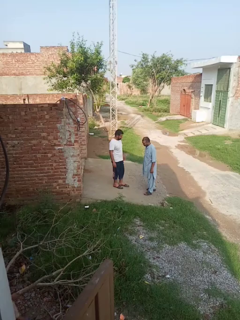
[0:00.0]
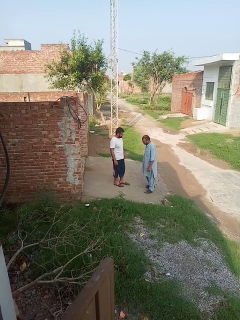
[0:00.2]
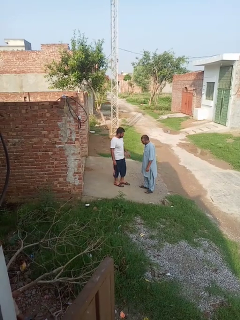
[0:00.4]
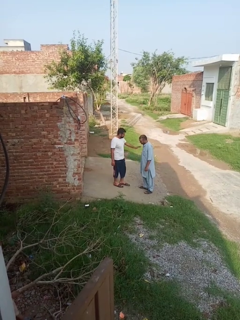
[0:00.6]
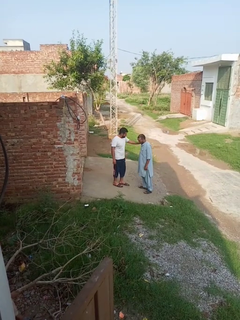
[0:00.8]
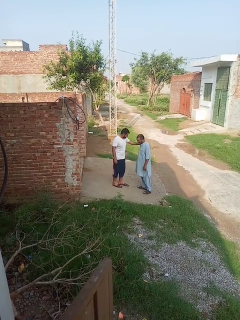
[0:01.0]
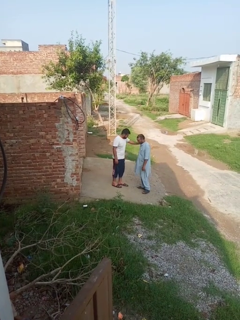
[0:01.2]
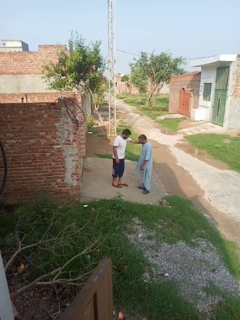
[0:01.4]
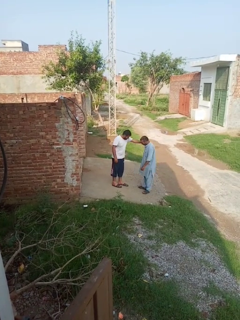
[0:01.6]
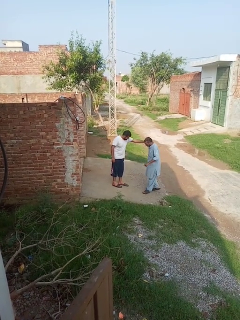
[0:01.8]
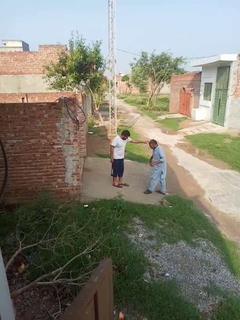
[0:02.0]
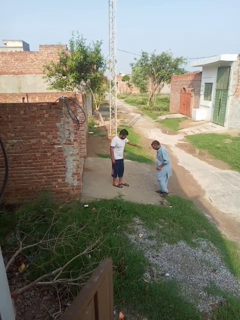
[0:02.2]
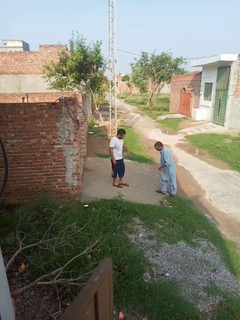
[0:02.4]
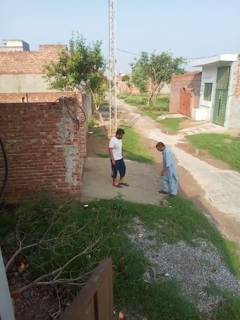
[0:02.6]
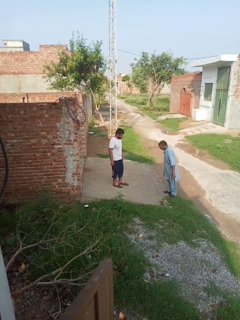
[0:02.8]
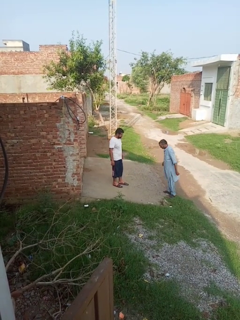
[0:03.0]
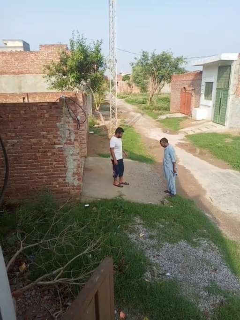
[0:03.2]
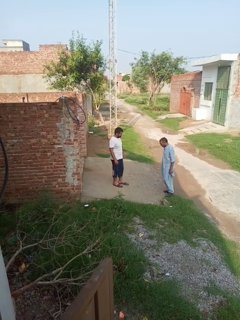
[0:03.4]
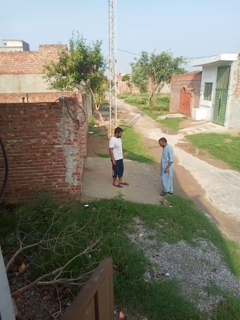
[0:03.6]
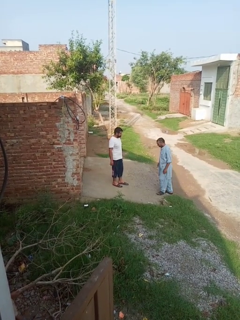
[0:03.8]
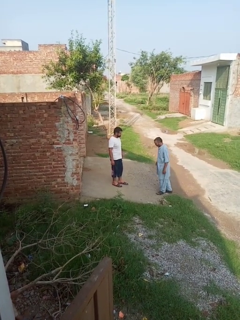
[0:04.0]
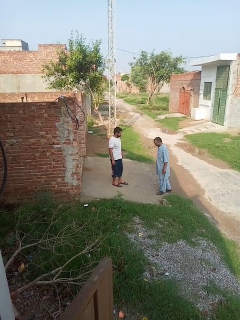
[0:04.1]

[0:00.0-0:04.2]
person shoves person

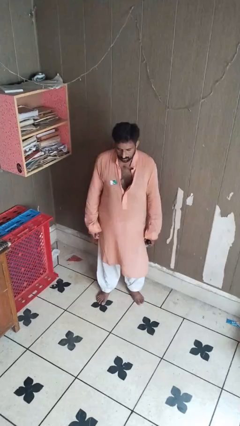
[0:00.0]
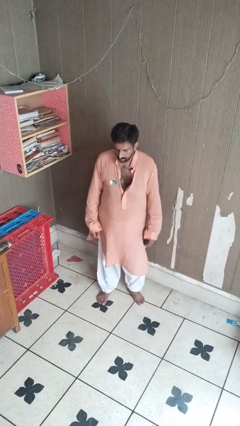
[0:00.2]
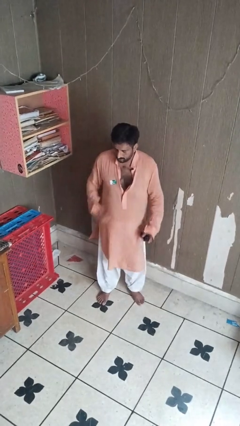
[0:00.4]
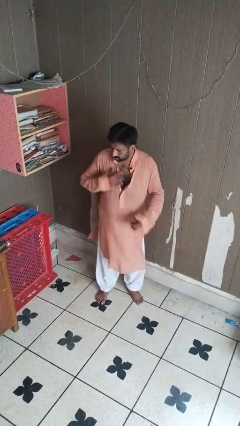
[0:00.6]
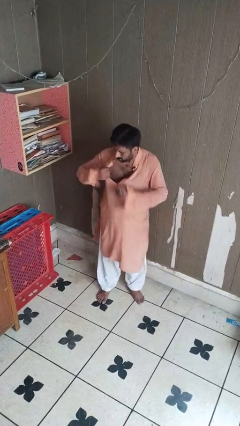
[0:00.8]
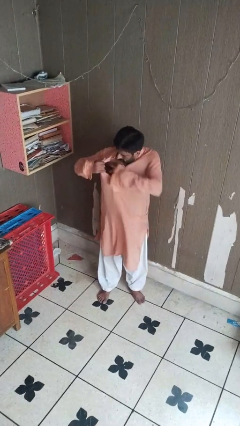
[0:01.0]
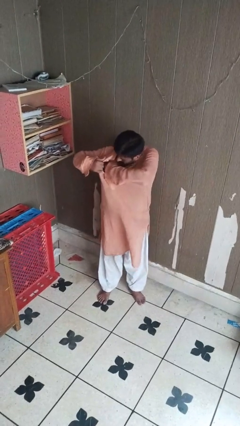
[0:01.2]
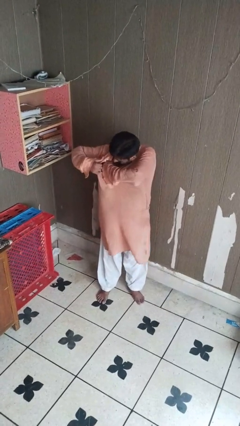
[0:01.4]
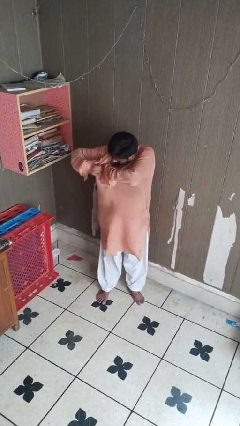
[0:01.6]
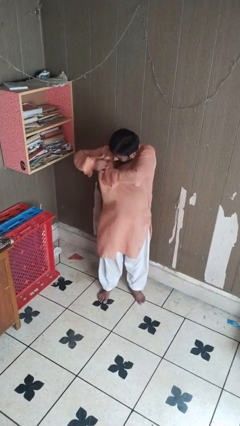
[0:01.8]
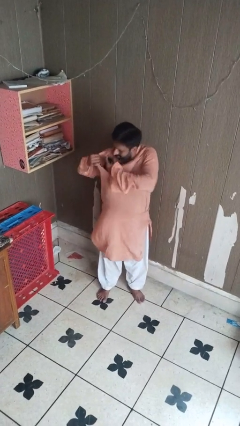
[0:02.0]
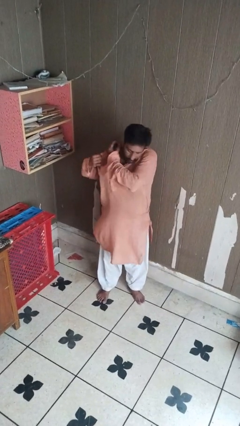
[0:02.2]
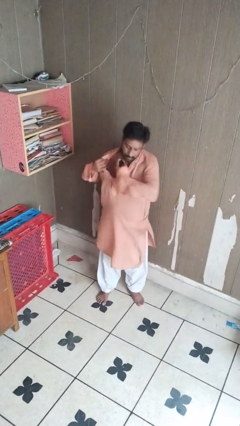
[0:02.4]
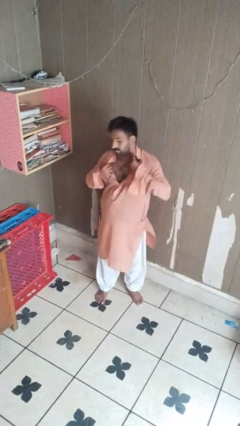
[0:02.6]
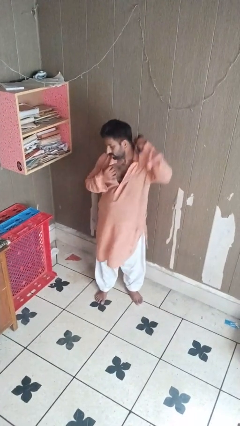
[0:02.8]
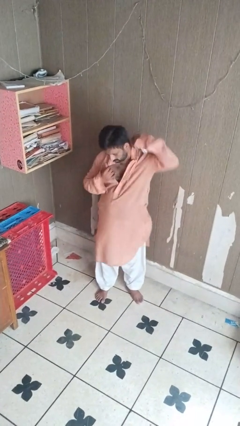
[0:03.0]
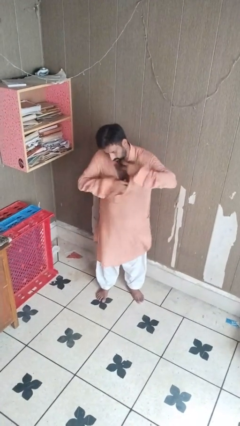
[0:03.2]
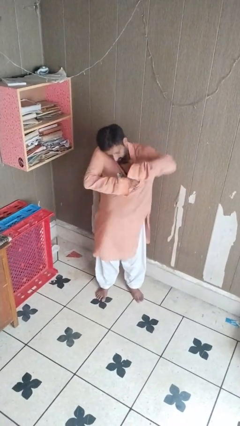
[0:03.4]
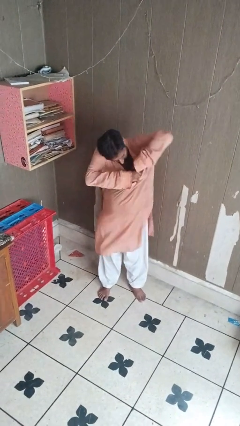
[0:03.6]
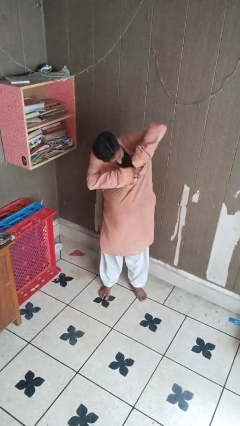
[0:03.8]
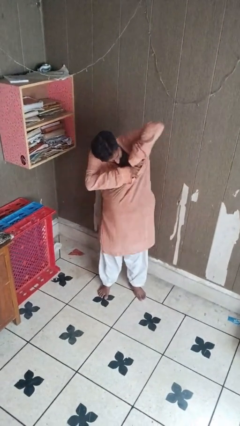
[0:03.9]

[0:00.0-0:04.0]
person applies deodorant

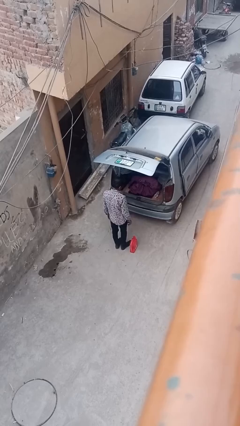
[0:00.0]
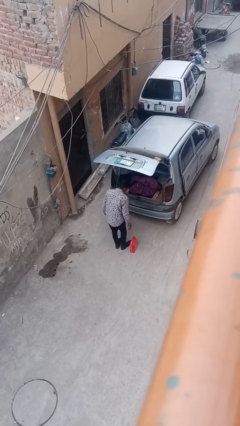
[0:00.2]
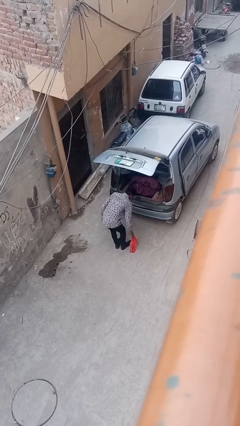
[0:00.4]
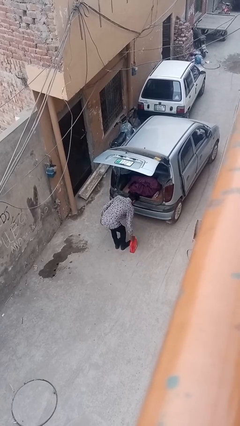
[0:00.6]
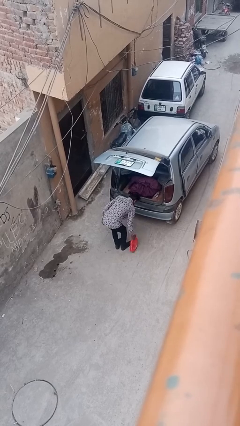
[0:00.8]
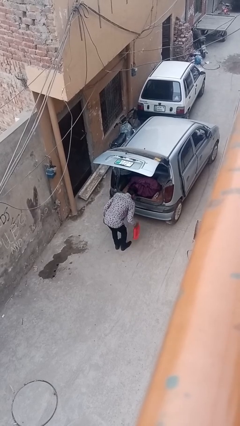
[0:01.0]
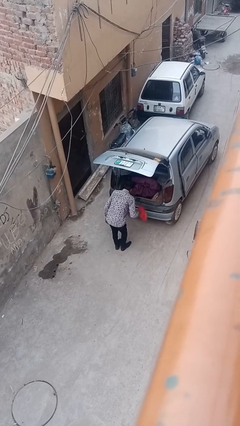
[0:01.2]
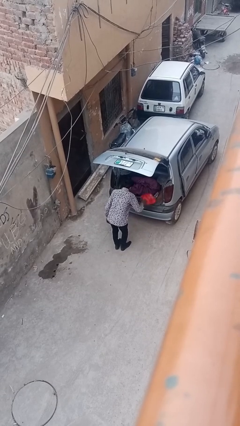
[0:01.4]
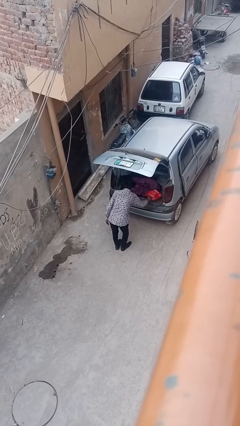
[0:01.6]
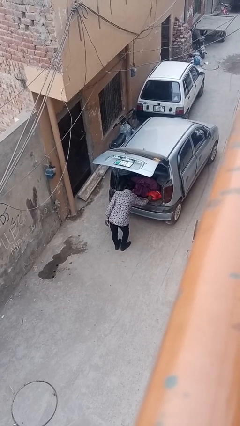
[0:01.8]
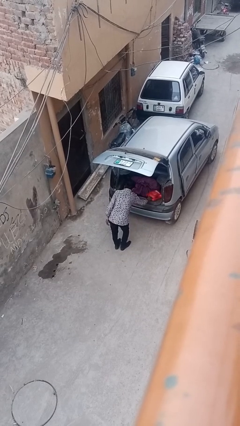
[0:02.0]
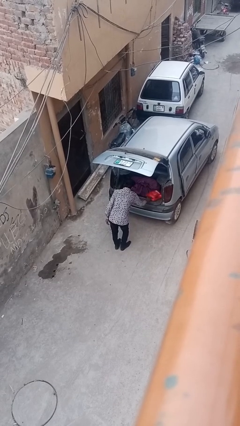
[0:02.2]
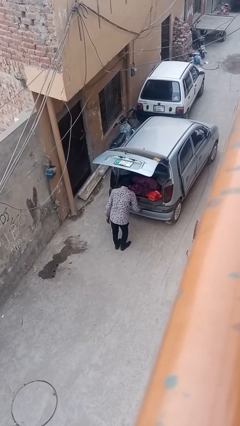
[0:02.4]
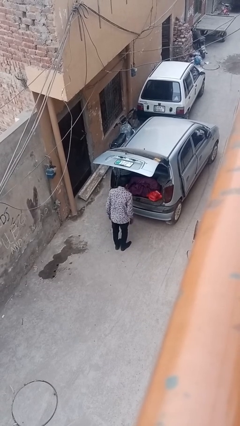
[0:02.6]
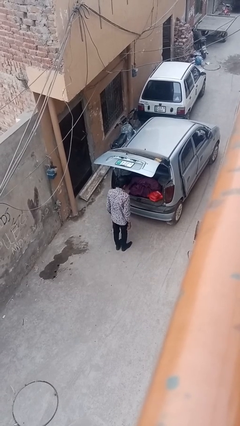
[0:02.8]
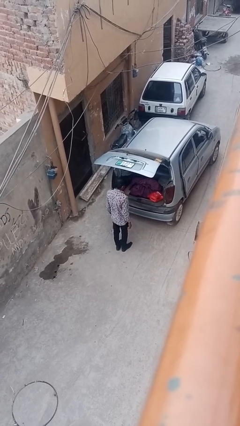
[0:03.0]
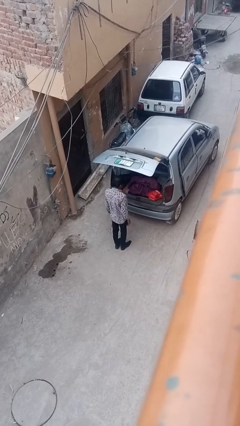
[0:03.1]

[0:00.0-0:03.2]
person loads car

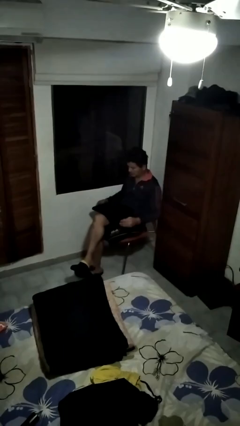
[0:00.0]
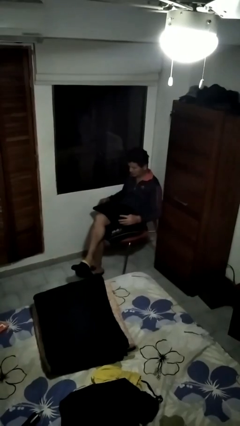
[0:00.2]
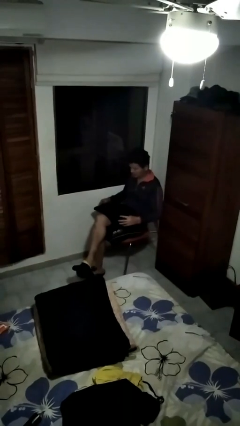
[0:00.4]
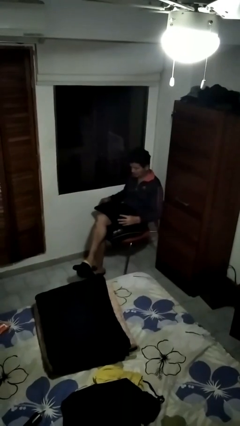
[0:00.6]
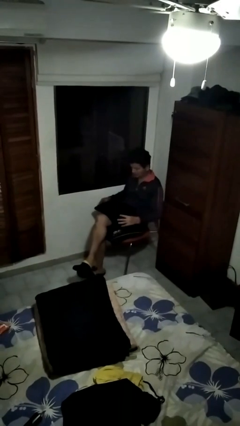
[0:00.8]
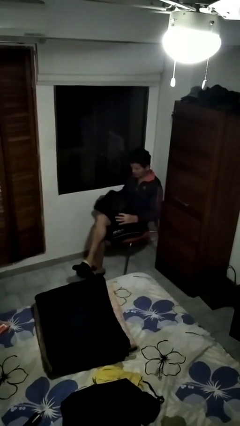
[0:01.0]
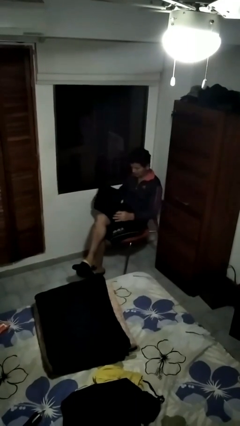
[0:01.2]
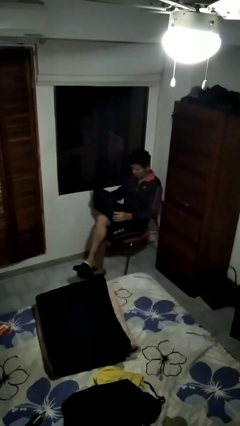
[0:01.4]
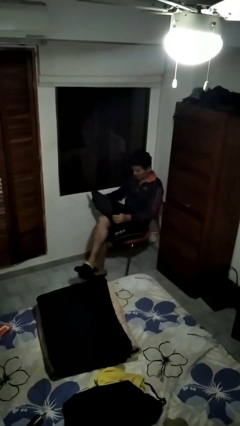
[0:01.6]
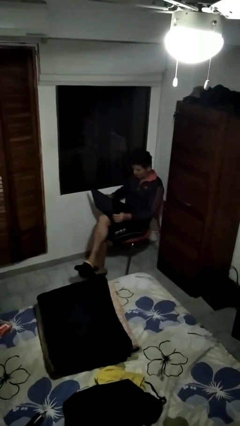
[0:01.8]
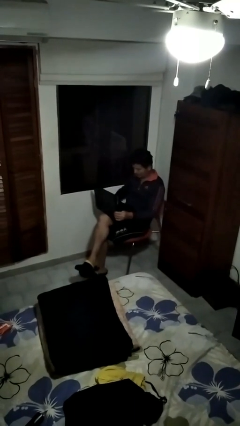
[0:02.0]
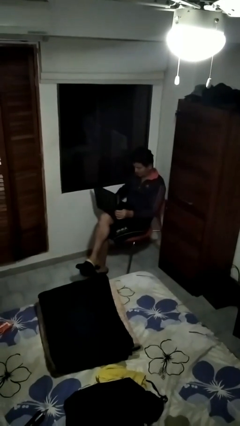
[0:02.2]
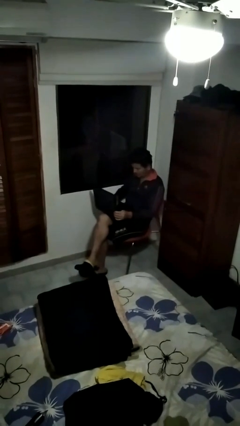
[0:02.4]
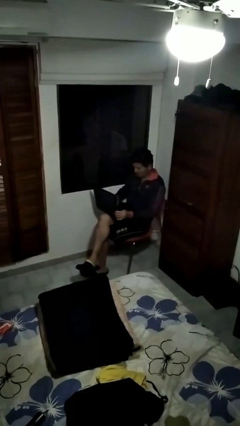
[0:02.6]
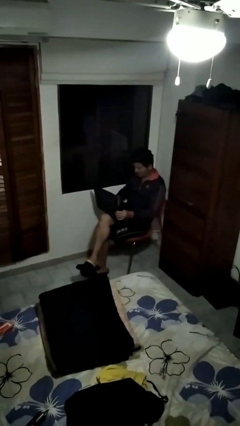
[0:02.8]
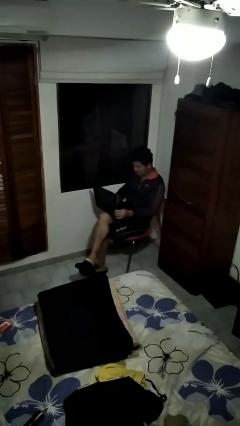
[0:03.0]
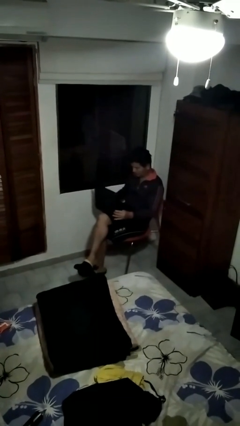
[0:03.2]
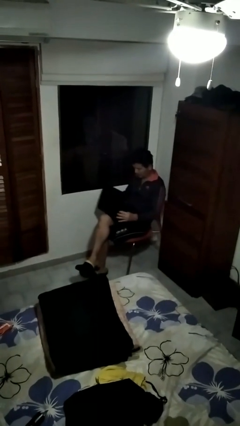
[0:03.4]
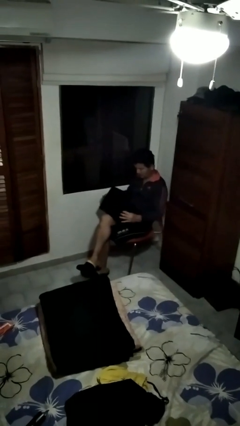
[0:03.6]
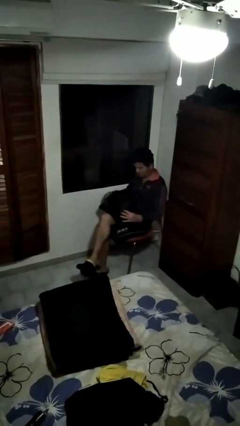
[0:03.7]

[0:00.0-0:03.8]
person interacts with laptop

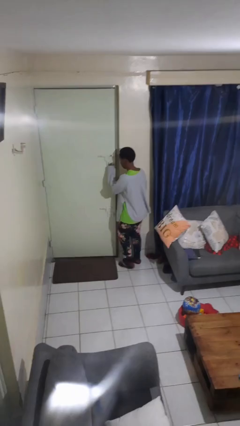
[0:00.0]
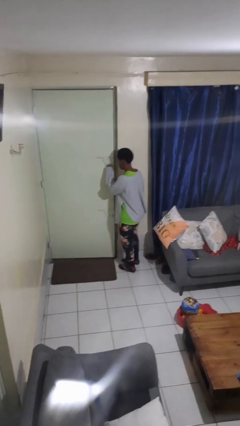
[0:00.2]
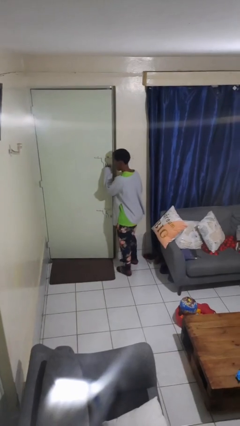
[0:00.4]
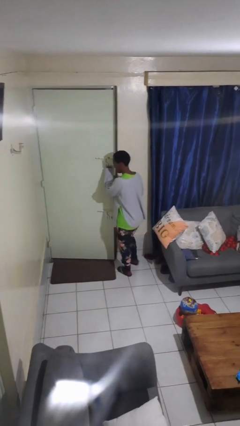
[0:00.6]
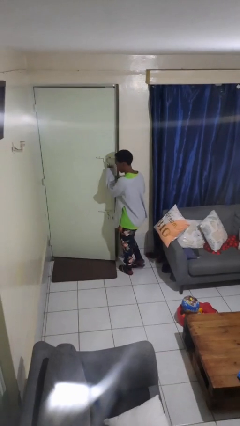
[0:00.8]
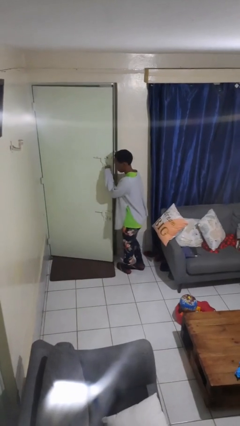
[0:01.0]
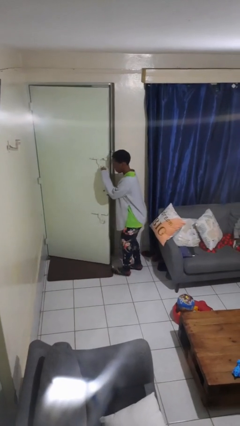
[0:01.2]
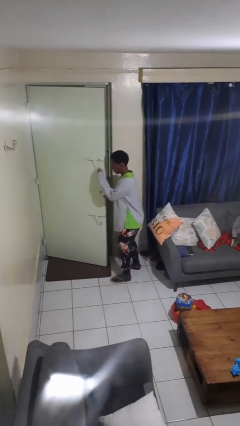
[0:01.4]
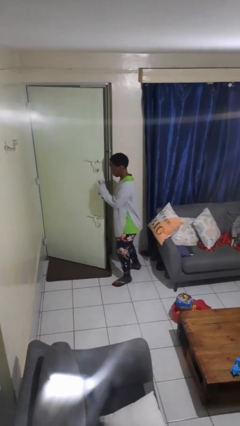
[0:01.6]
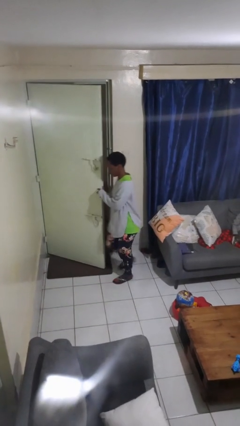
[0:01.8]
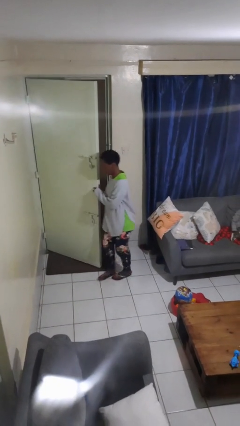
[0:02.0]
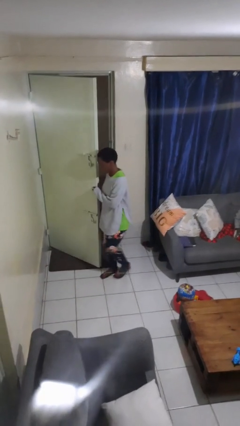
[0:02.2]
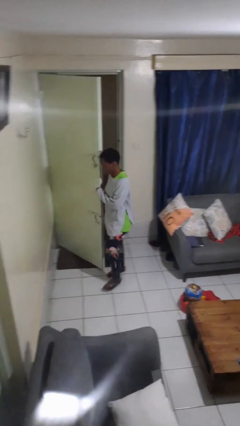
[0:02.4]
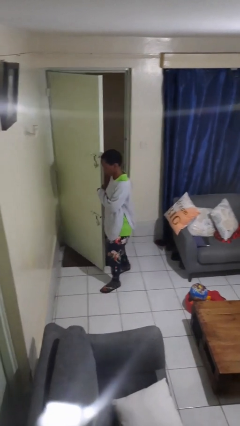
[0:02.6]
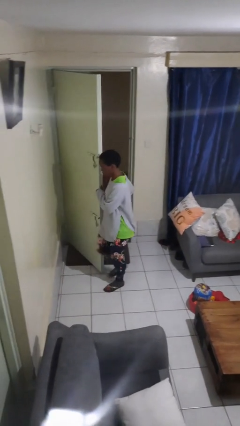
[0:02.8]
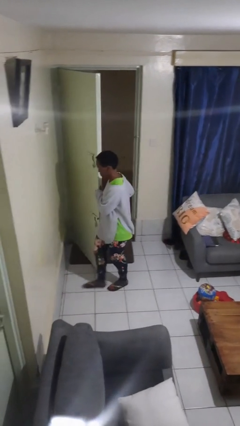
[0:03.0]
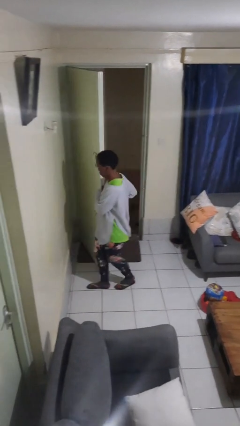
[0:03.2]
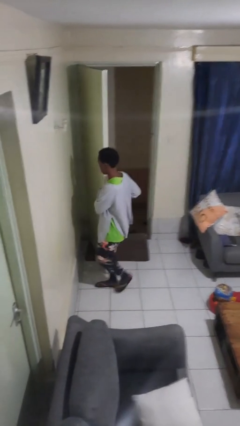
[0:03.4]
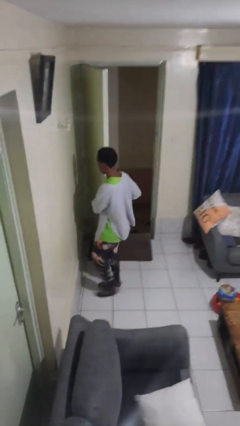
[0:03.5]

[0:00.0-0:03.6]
person opens facility door
